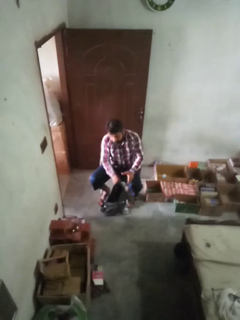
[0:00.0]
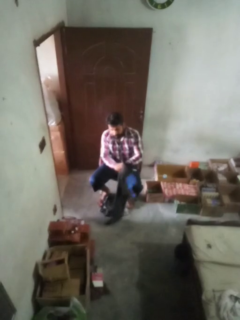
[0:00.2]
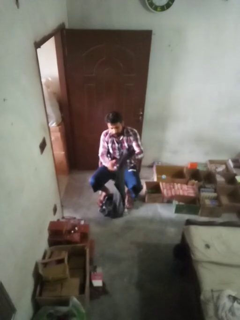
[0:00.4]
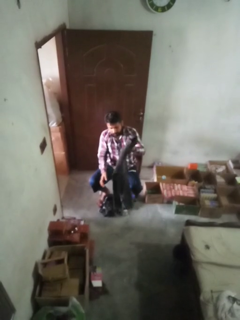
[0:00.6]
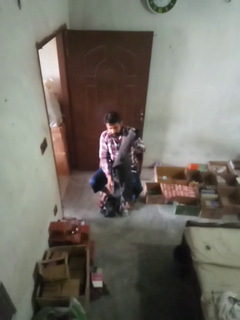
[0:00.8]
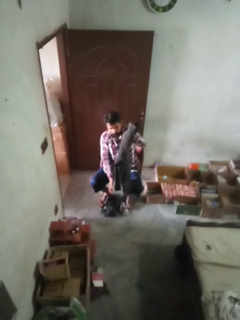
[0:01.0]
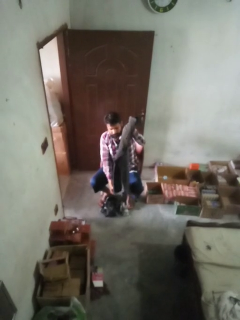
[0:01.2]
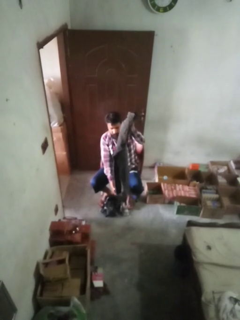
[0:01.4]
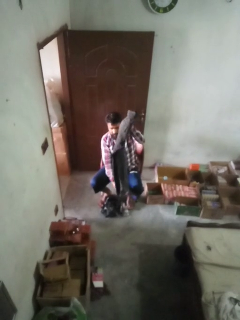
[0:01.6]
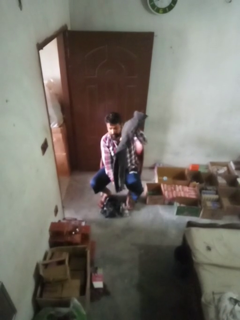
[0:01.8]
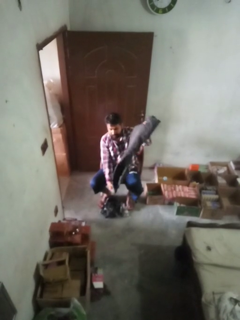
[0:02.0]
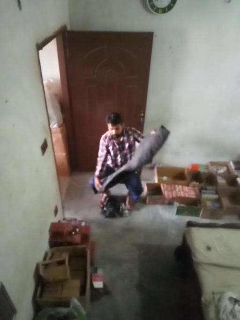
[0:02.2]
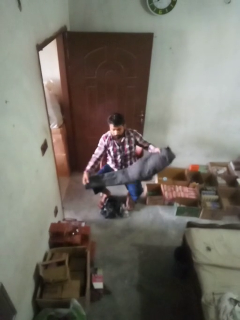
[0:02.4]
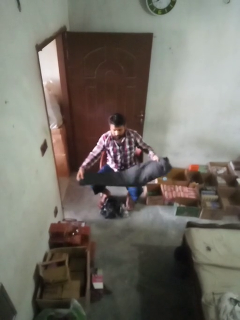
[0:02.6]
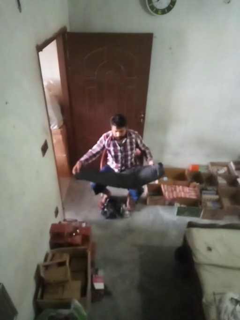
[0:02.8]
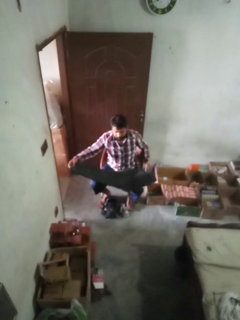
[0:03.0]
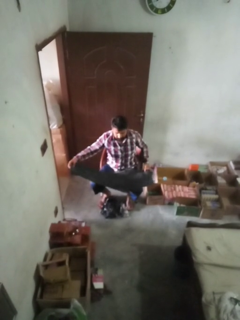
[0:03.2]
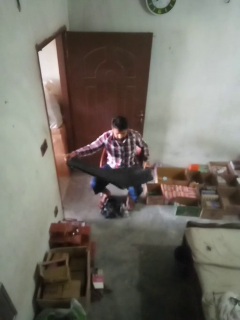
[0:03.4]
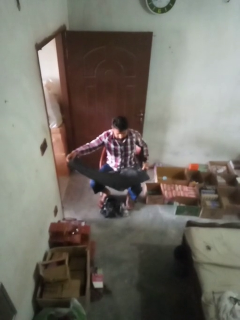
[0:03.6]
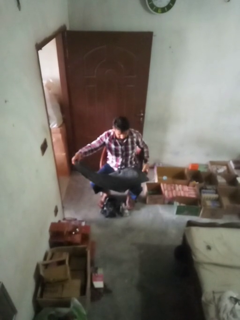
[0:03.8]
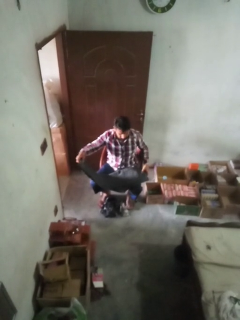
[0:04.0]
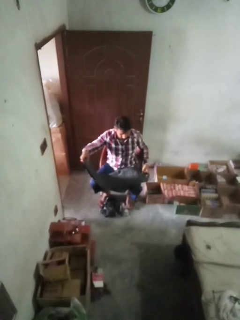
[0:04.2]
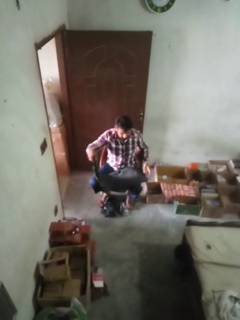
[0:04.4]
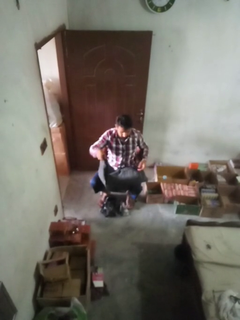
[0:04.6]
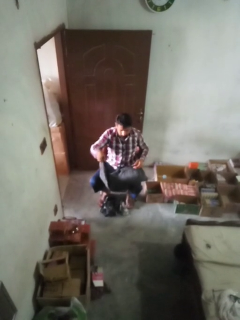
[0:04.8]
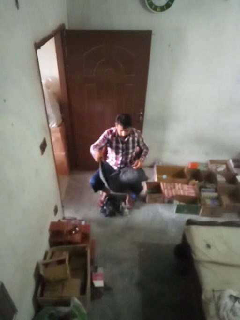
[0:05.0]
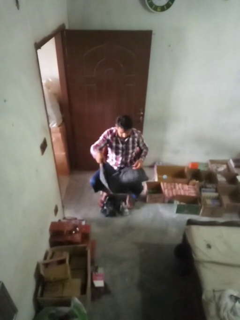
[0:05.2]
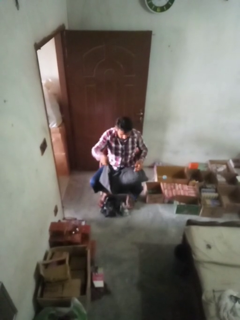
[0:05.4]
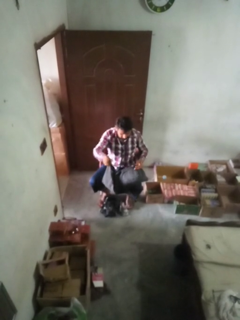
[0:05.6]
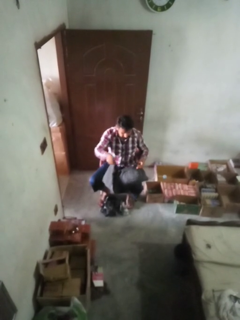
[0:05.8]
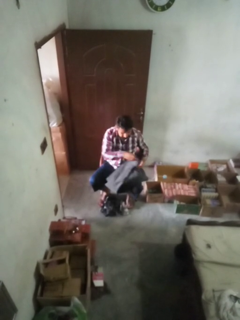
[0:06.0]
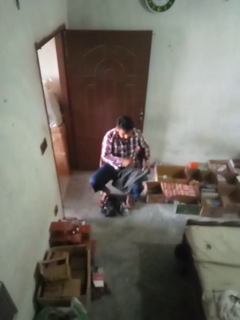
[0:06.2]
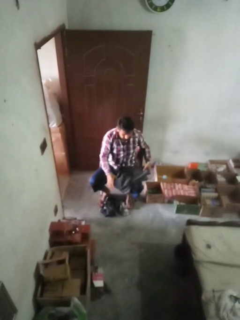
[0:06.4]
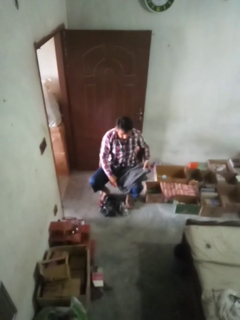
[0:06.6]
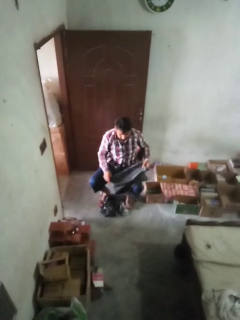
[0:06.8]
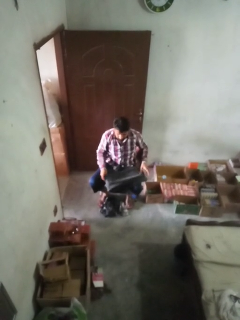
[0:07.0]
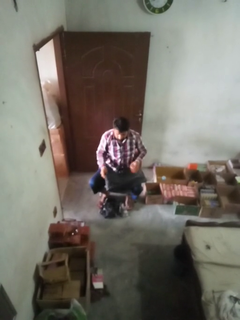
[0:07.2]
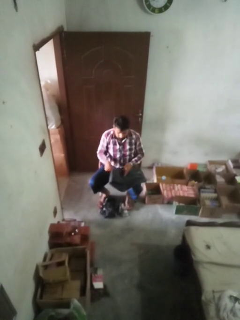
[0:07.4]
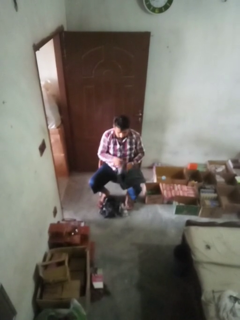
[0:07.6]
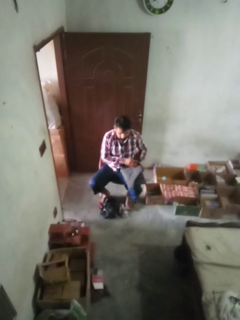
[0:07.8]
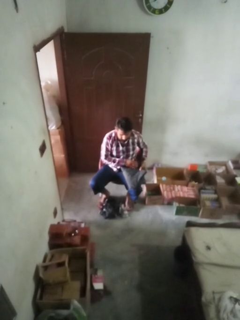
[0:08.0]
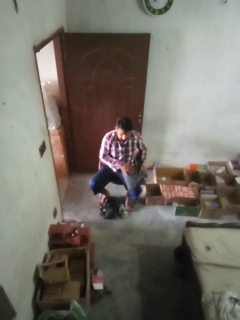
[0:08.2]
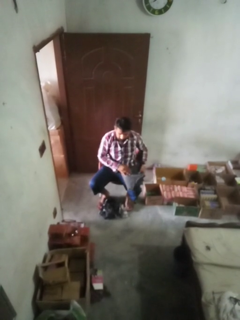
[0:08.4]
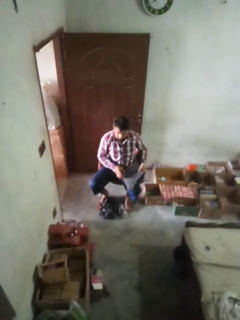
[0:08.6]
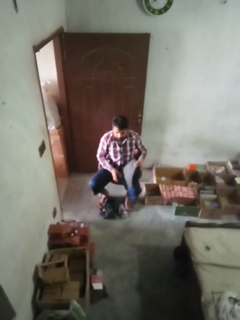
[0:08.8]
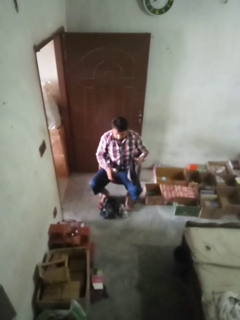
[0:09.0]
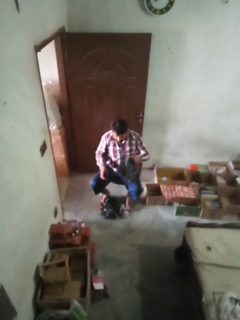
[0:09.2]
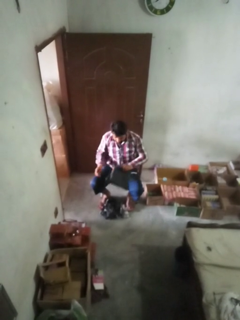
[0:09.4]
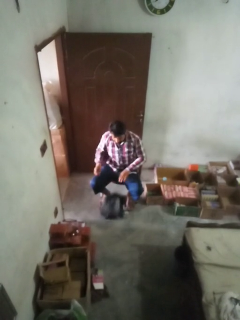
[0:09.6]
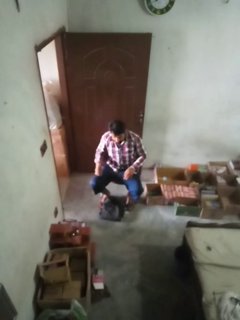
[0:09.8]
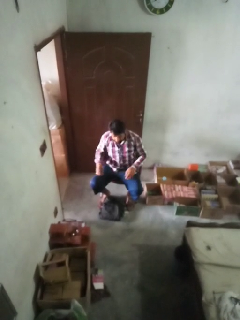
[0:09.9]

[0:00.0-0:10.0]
person folds pants

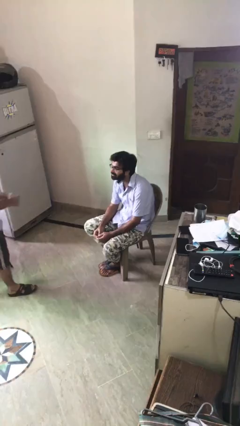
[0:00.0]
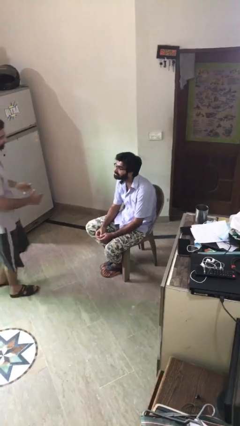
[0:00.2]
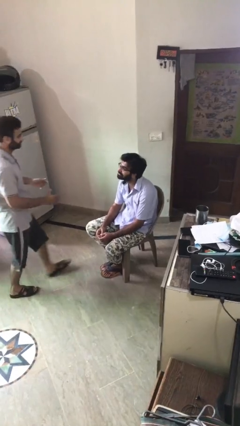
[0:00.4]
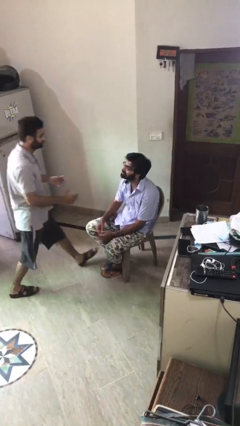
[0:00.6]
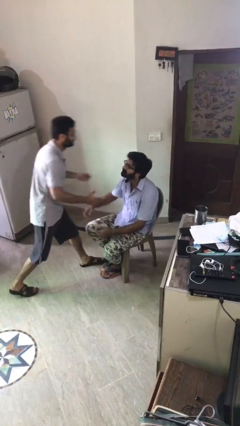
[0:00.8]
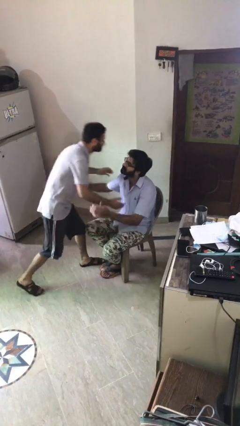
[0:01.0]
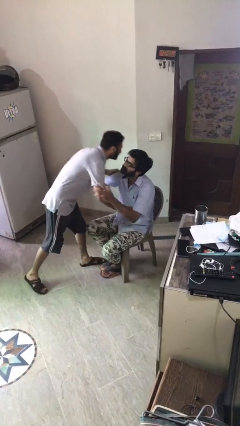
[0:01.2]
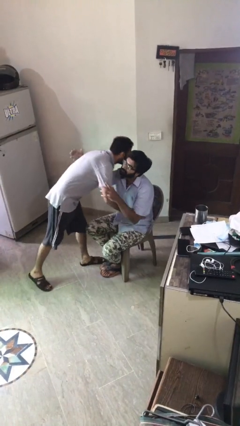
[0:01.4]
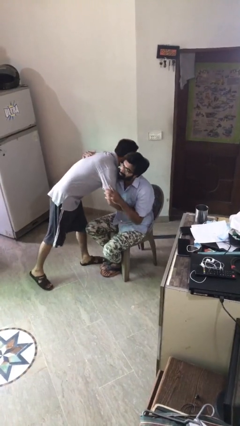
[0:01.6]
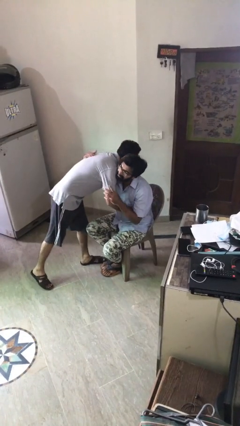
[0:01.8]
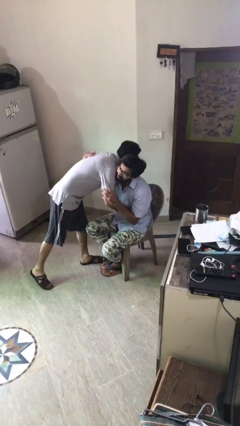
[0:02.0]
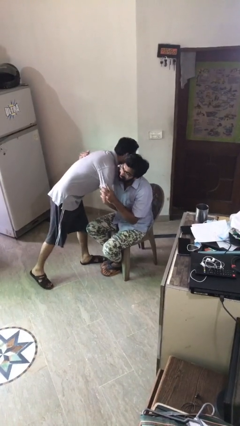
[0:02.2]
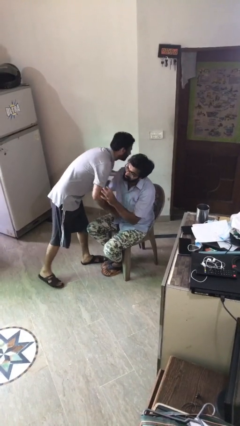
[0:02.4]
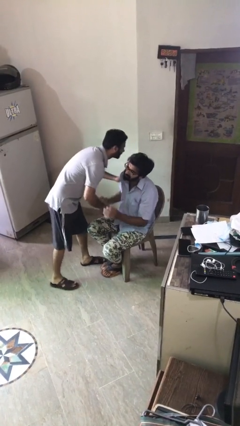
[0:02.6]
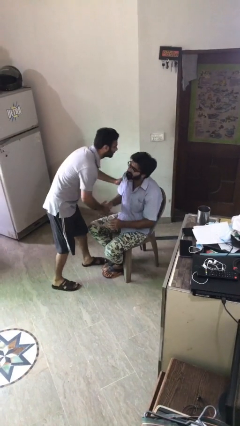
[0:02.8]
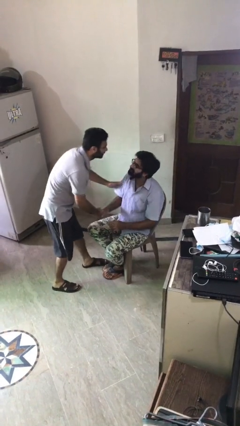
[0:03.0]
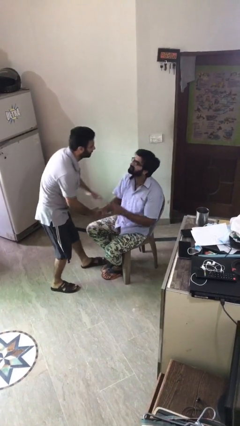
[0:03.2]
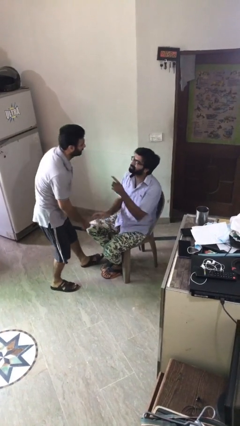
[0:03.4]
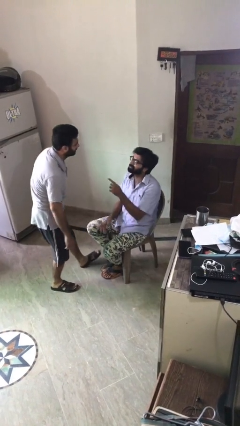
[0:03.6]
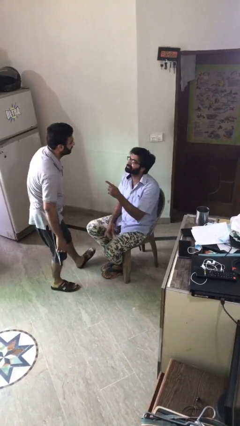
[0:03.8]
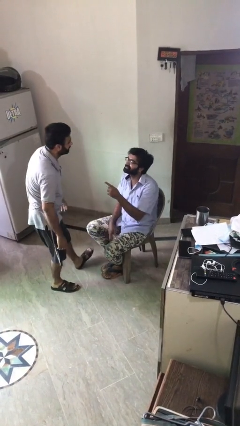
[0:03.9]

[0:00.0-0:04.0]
person embraces person

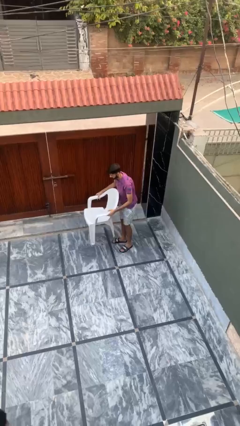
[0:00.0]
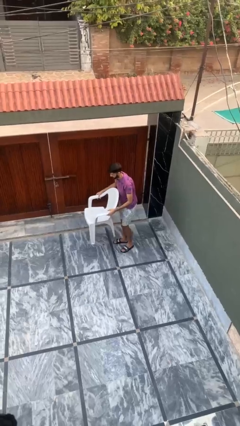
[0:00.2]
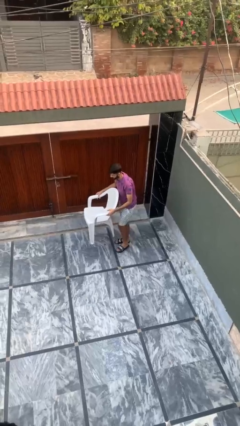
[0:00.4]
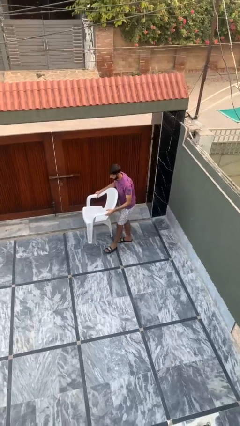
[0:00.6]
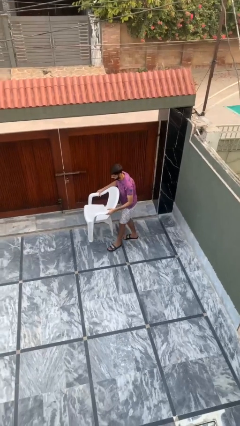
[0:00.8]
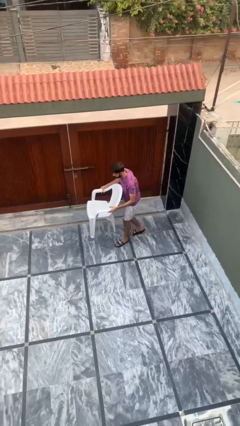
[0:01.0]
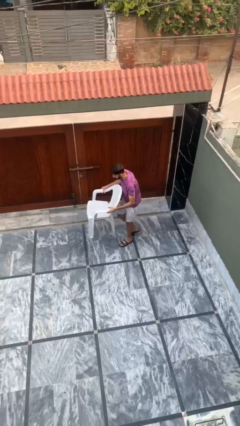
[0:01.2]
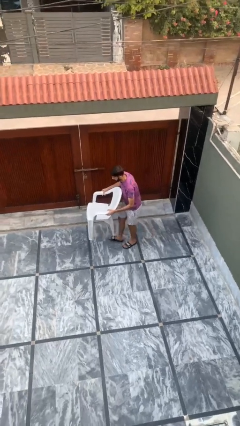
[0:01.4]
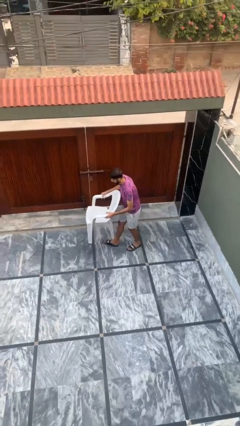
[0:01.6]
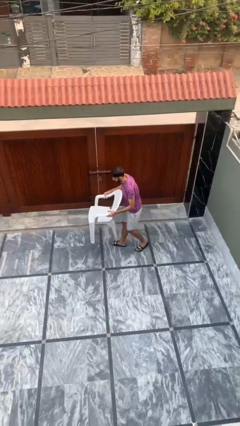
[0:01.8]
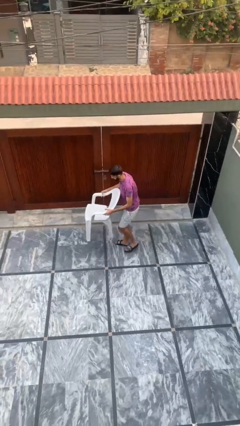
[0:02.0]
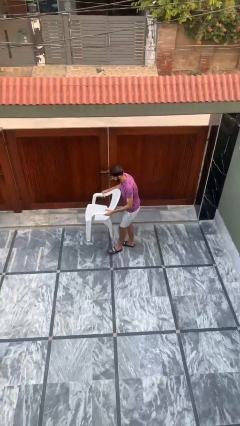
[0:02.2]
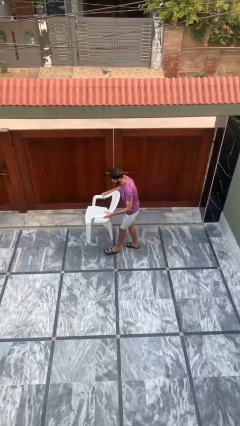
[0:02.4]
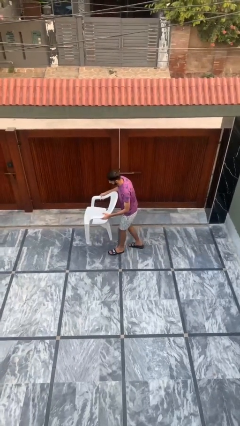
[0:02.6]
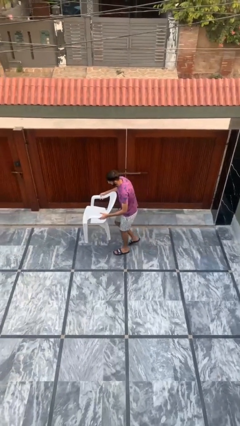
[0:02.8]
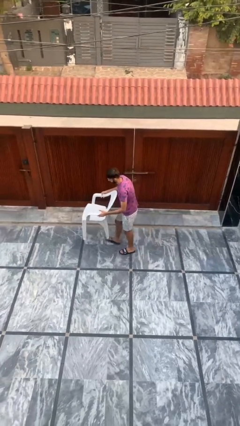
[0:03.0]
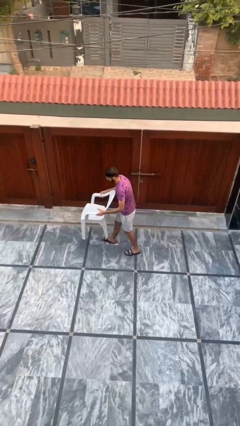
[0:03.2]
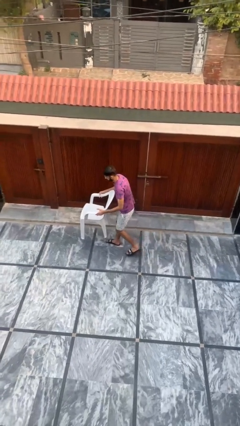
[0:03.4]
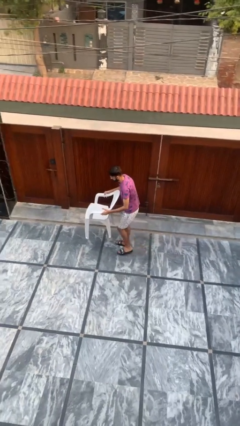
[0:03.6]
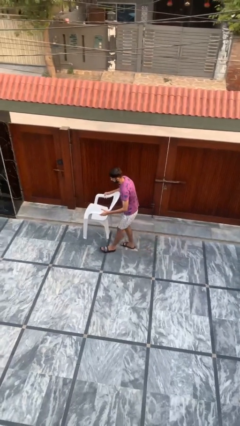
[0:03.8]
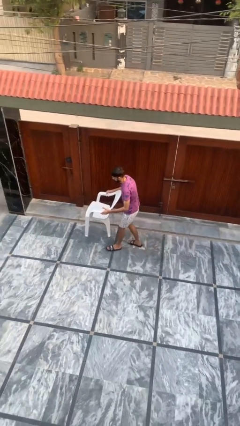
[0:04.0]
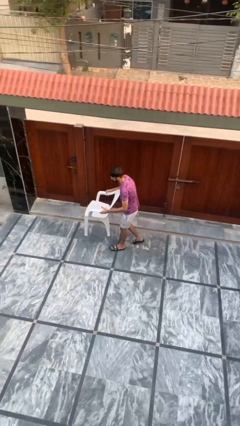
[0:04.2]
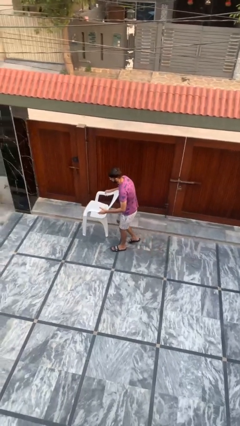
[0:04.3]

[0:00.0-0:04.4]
person carries heavy object

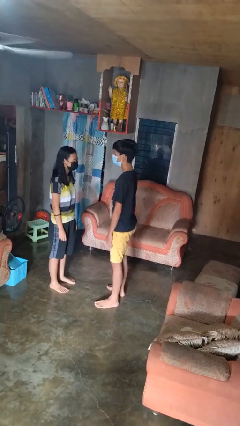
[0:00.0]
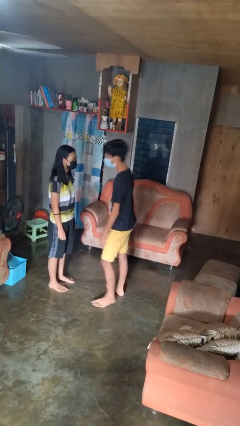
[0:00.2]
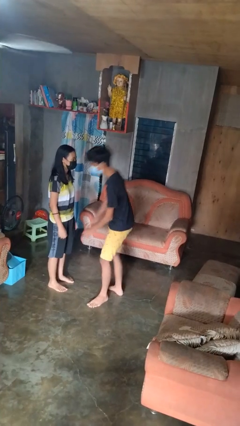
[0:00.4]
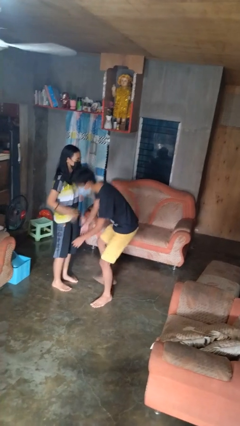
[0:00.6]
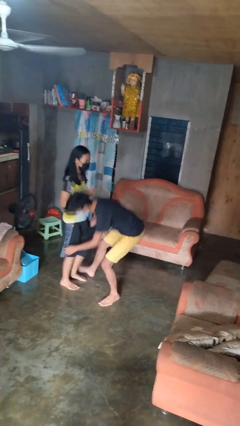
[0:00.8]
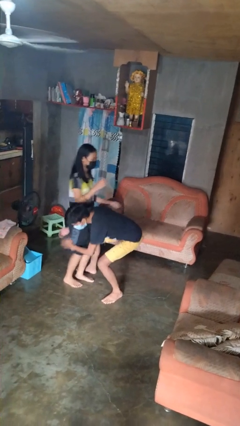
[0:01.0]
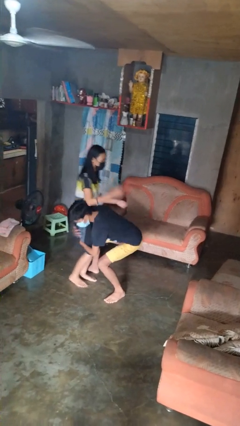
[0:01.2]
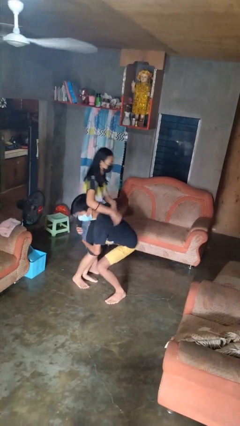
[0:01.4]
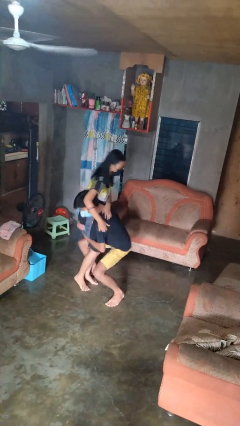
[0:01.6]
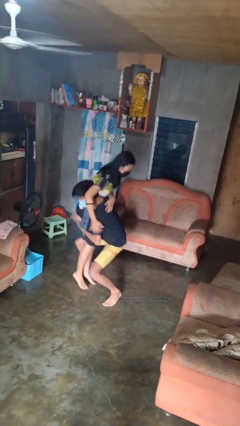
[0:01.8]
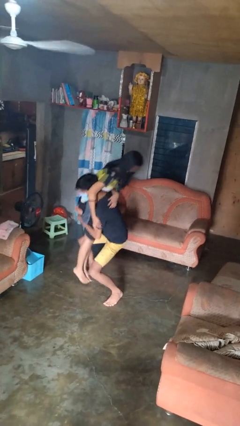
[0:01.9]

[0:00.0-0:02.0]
person carries person over shoulder
